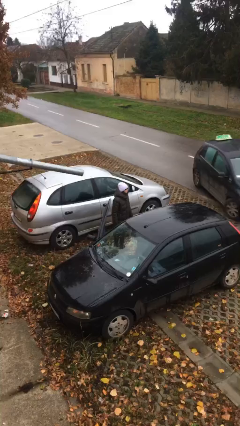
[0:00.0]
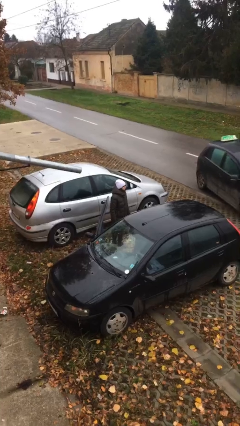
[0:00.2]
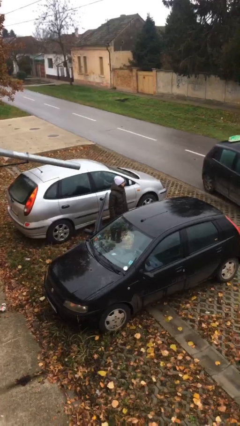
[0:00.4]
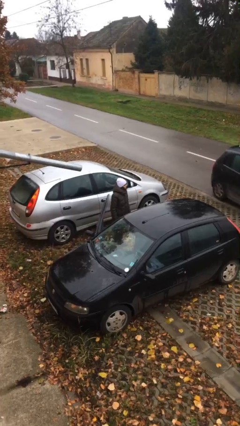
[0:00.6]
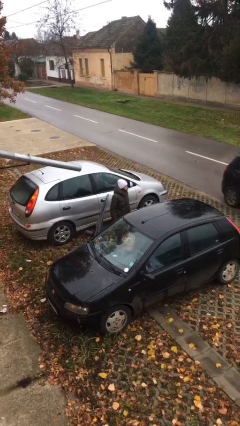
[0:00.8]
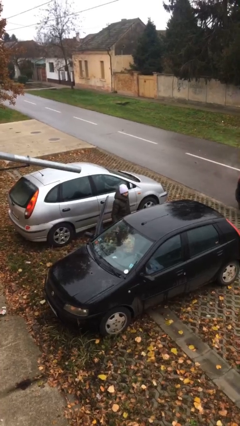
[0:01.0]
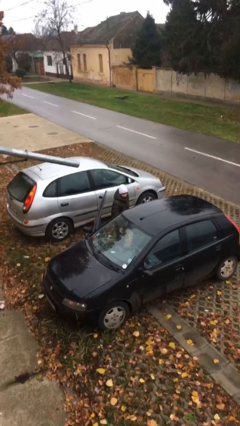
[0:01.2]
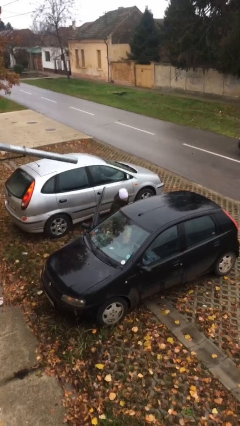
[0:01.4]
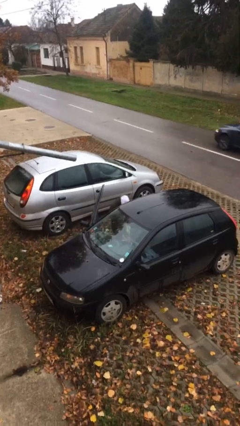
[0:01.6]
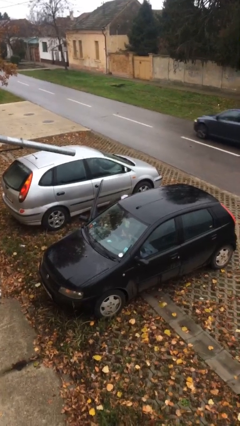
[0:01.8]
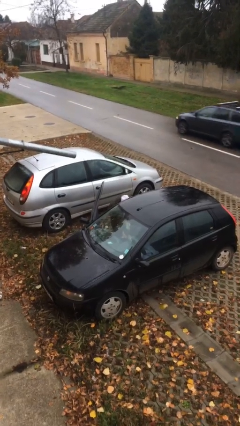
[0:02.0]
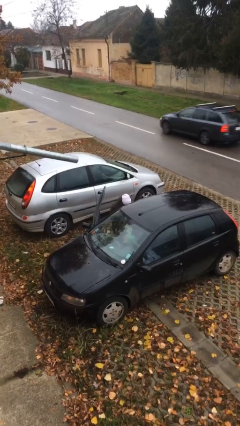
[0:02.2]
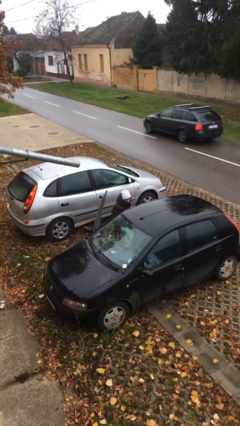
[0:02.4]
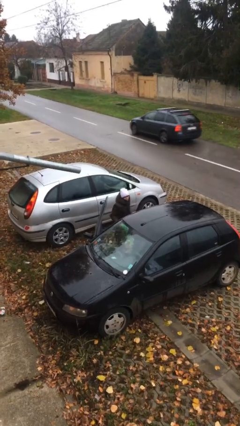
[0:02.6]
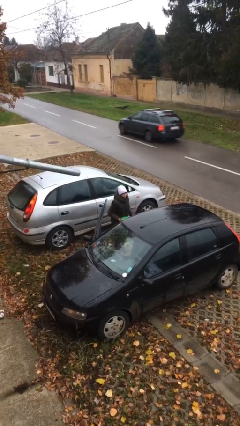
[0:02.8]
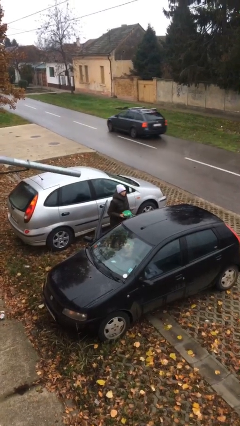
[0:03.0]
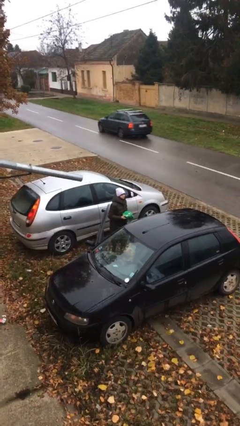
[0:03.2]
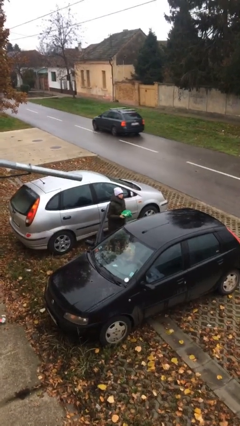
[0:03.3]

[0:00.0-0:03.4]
person unloads car

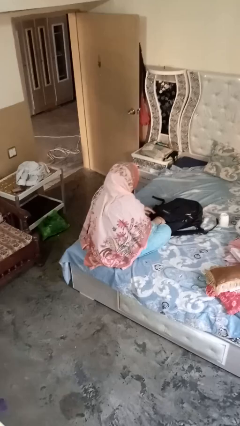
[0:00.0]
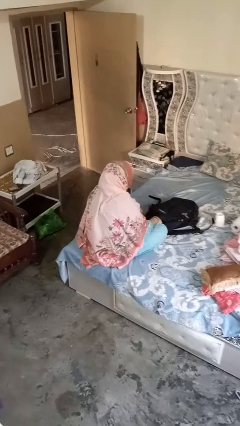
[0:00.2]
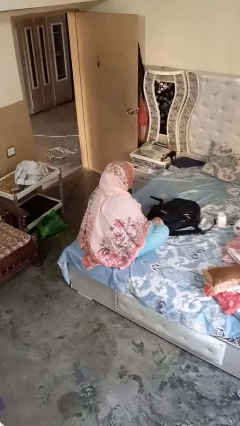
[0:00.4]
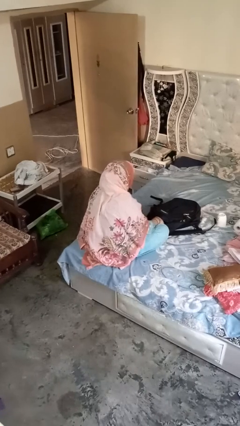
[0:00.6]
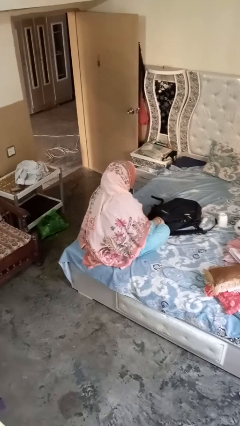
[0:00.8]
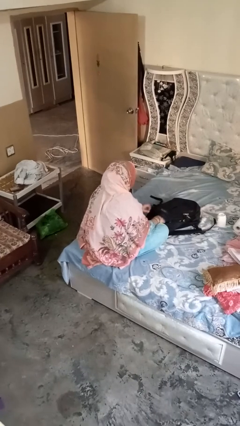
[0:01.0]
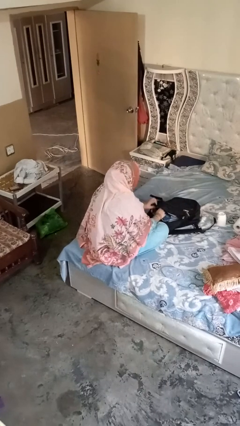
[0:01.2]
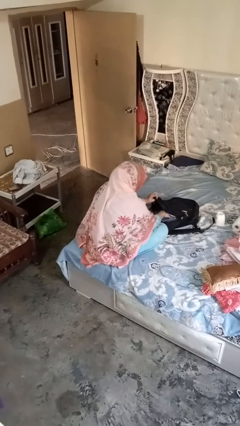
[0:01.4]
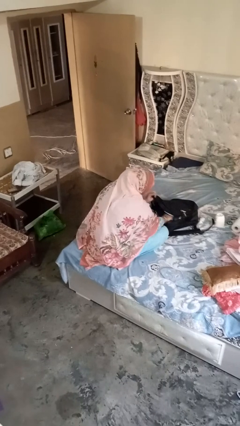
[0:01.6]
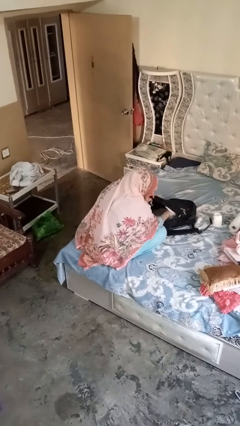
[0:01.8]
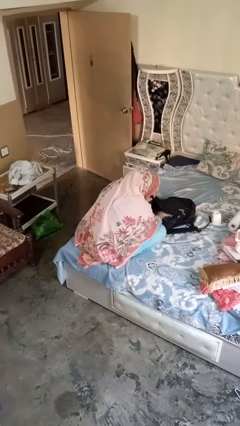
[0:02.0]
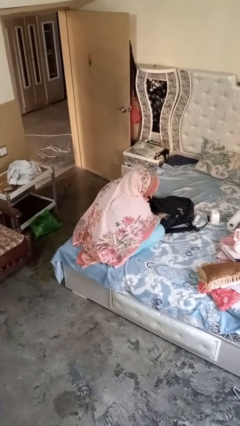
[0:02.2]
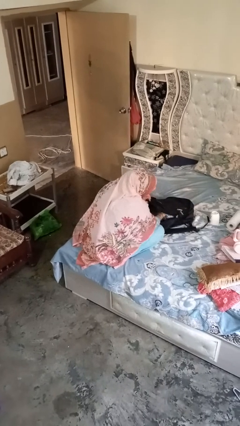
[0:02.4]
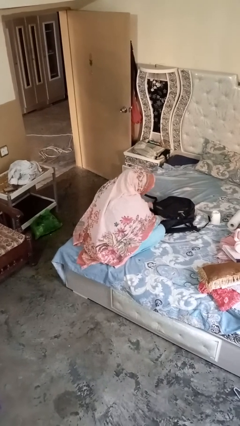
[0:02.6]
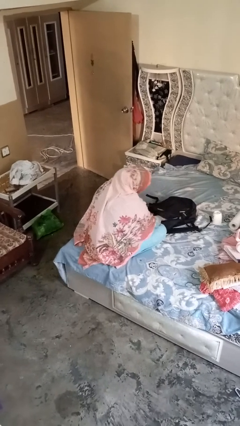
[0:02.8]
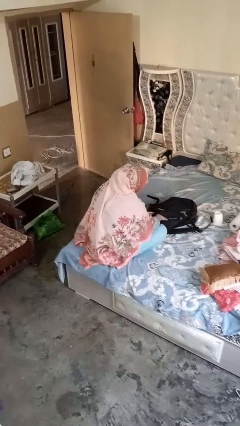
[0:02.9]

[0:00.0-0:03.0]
person searches in bag

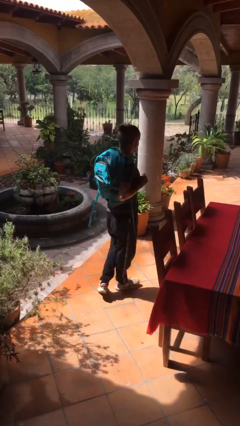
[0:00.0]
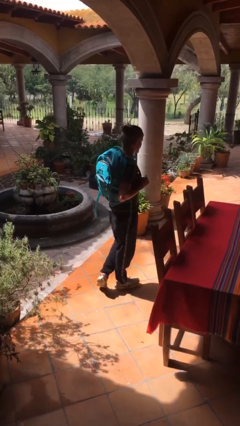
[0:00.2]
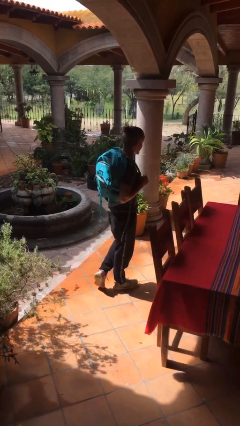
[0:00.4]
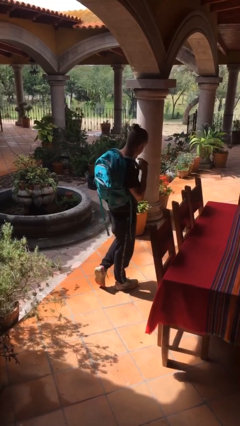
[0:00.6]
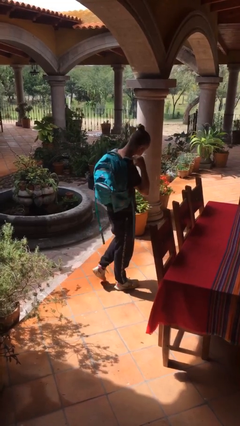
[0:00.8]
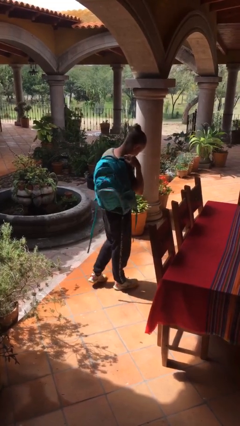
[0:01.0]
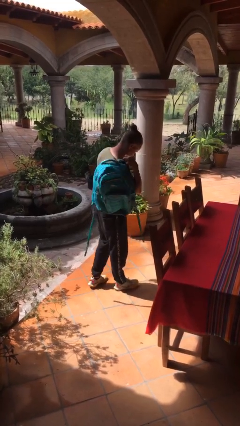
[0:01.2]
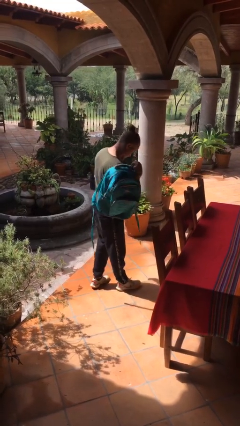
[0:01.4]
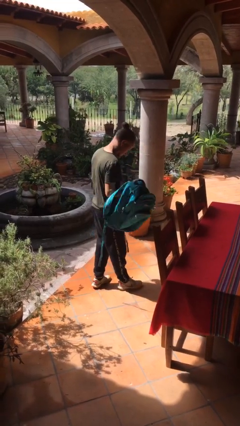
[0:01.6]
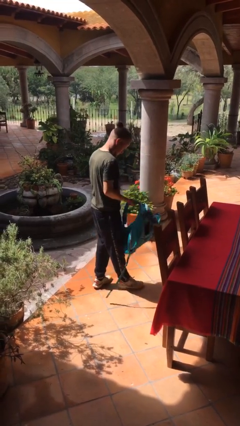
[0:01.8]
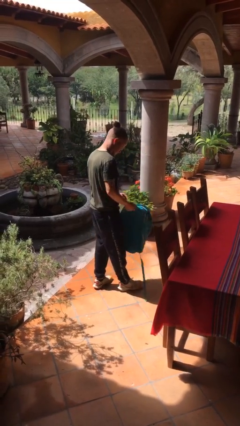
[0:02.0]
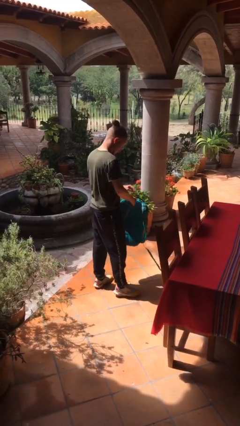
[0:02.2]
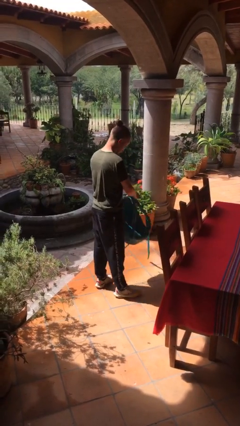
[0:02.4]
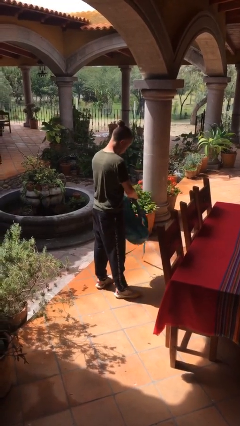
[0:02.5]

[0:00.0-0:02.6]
person takes off backpack

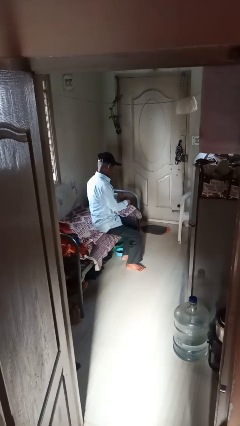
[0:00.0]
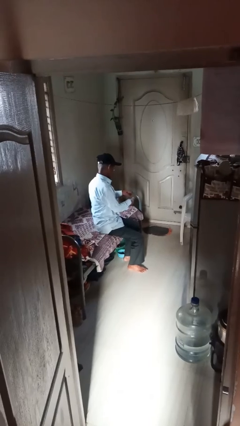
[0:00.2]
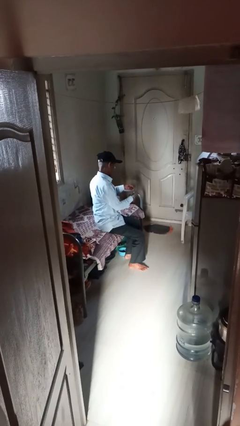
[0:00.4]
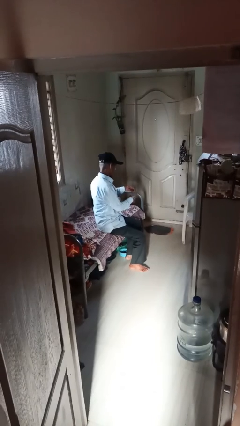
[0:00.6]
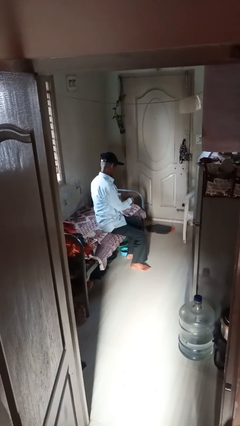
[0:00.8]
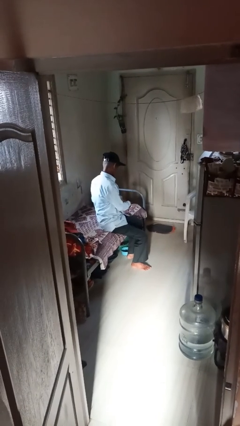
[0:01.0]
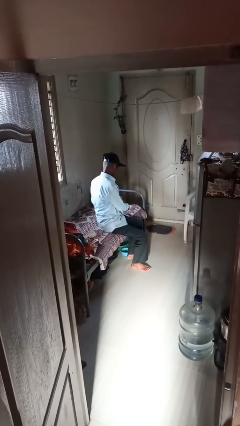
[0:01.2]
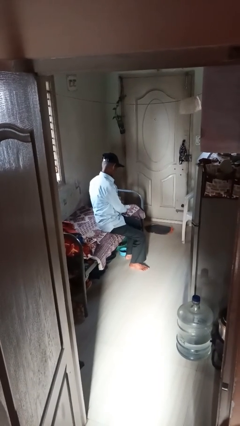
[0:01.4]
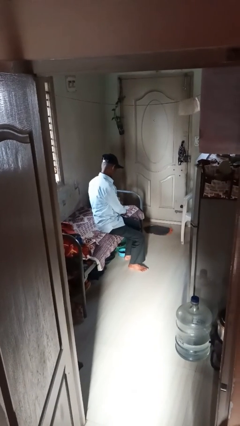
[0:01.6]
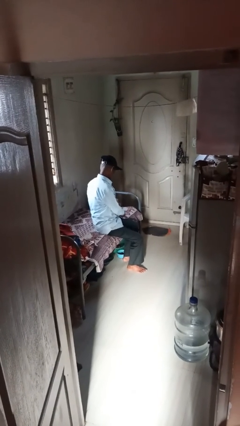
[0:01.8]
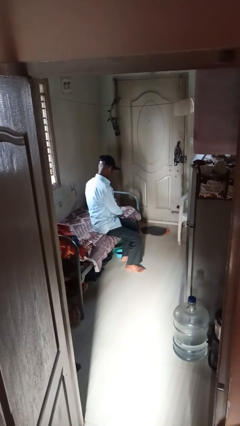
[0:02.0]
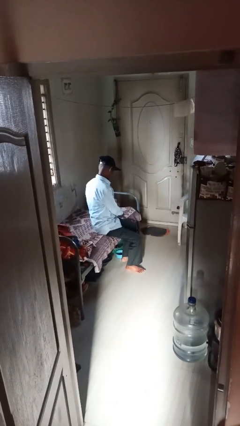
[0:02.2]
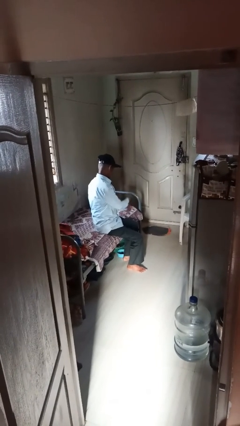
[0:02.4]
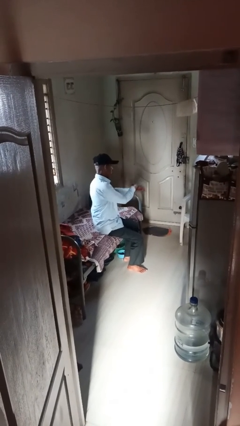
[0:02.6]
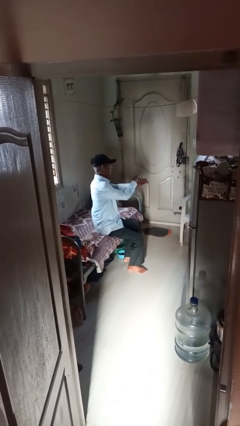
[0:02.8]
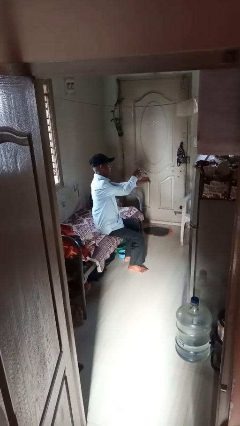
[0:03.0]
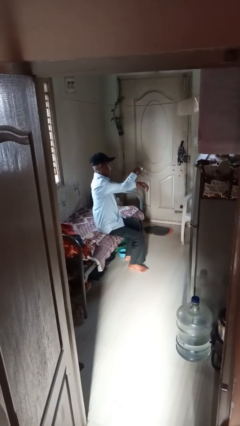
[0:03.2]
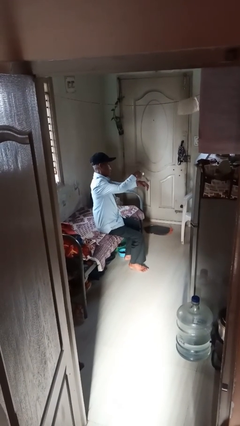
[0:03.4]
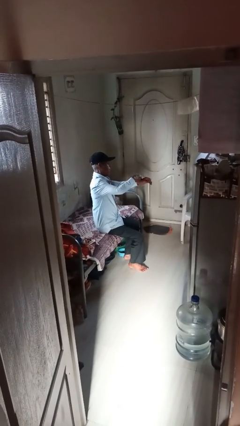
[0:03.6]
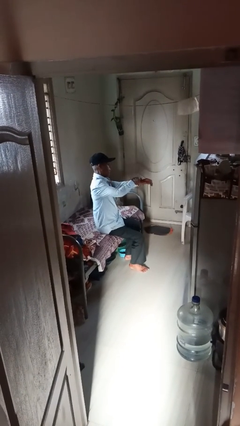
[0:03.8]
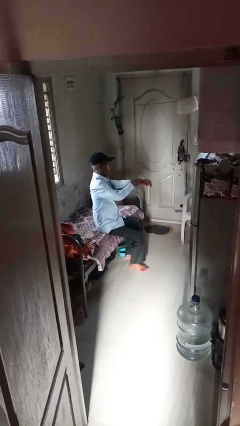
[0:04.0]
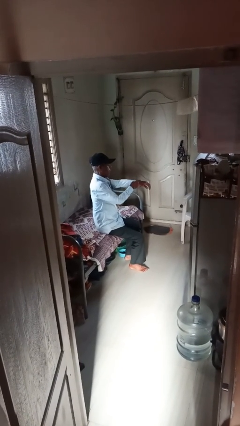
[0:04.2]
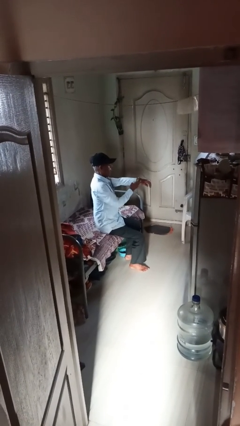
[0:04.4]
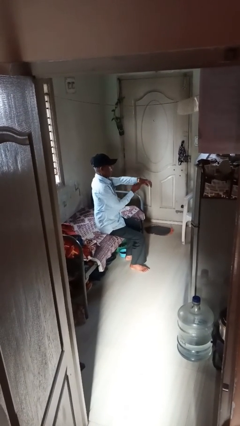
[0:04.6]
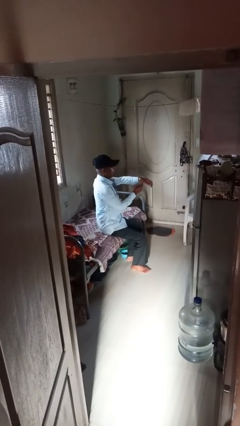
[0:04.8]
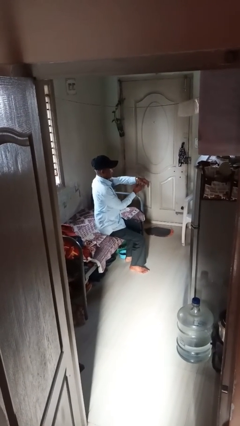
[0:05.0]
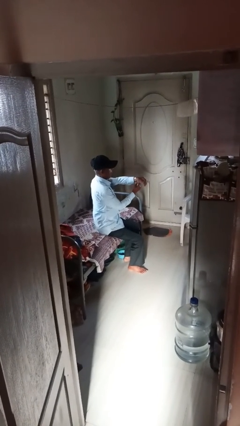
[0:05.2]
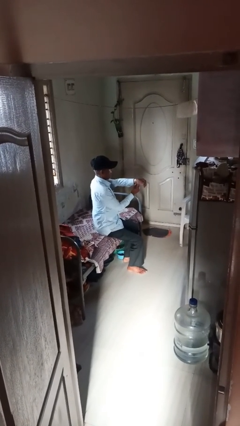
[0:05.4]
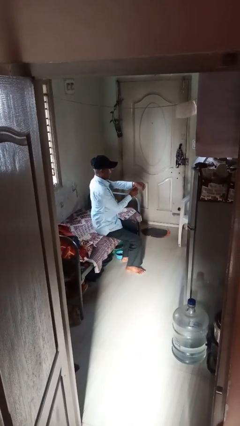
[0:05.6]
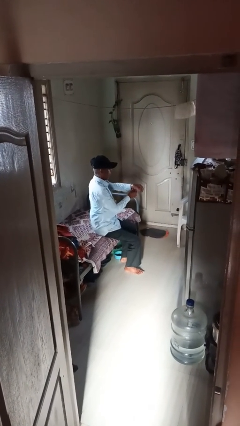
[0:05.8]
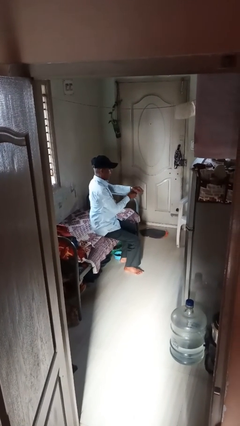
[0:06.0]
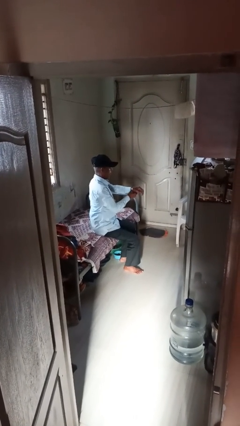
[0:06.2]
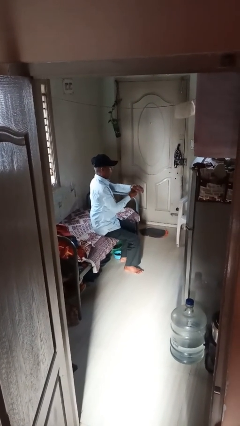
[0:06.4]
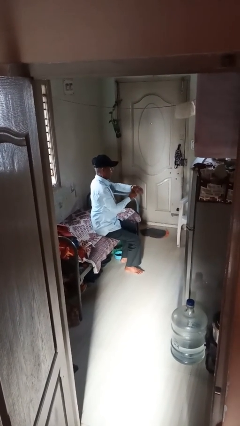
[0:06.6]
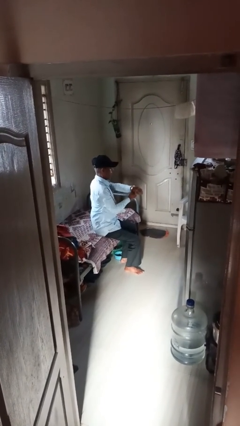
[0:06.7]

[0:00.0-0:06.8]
person puts on wristwatch

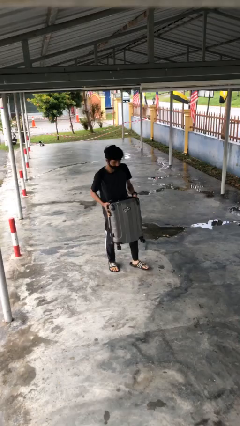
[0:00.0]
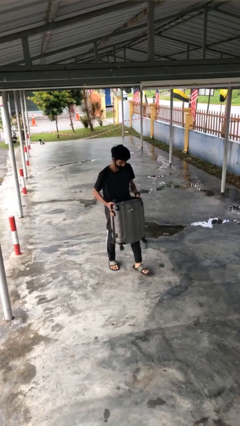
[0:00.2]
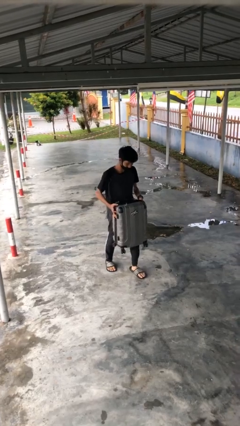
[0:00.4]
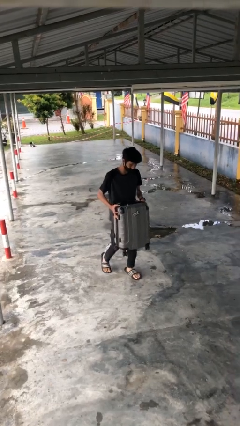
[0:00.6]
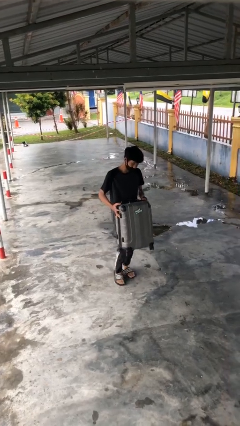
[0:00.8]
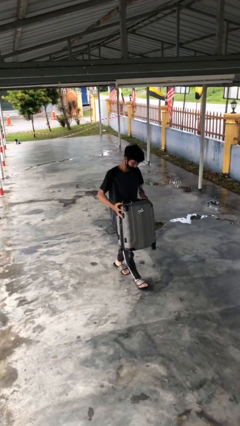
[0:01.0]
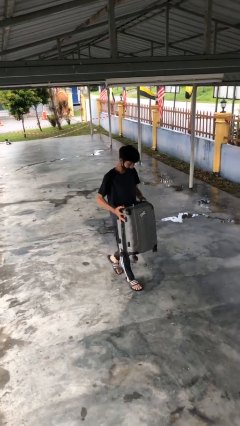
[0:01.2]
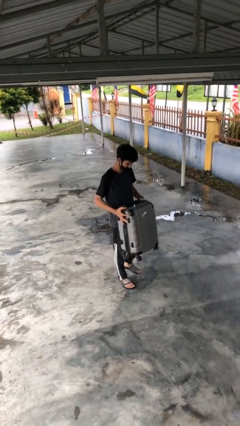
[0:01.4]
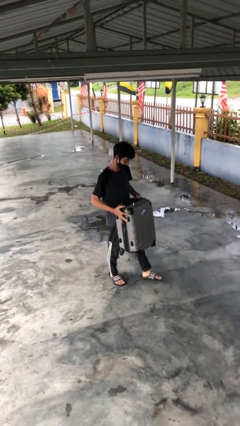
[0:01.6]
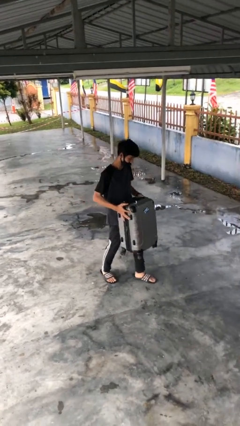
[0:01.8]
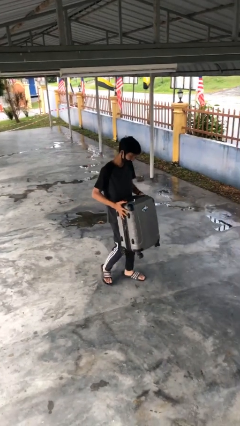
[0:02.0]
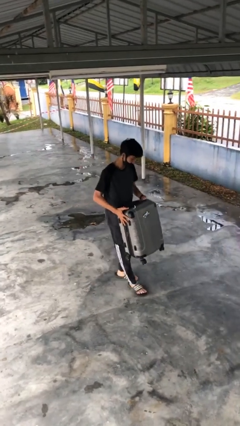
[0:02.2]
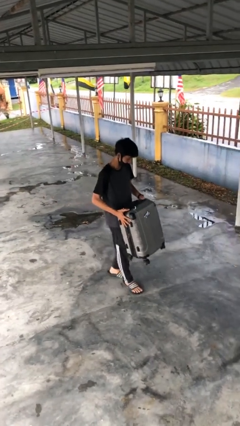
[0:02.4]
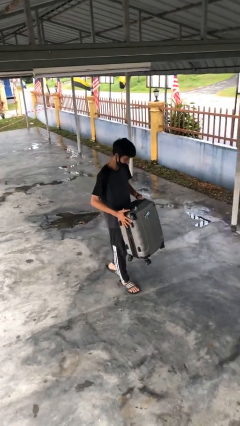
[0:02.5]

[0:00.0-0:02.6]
person carries heavy object
